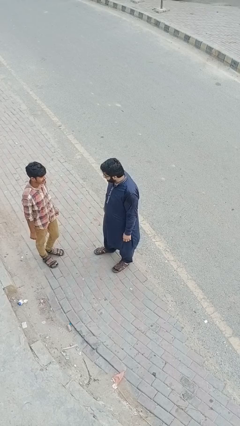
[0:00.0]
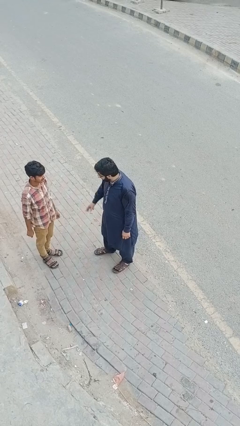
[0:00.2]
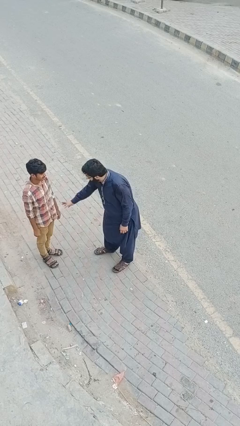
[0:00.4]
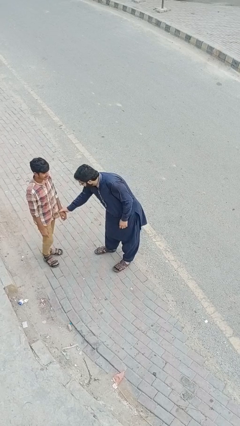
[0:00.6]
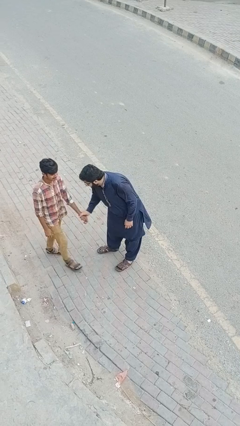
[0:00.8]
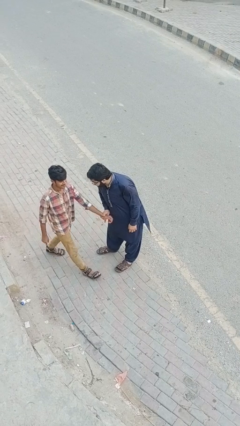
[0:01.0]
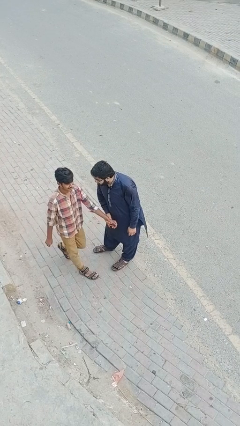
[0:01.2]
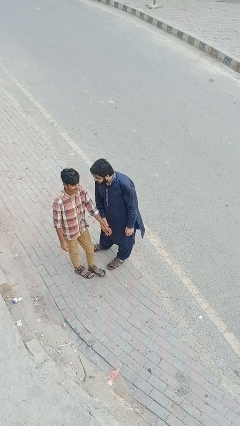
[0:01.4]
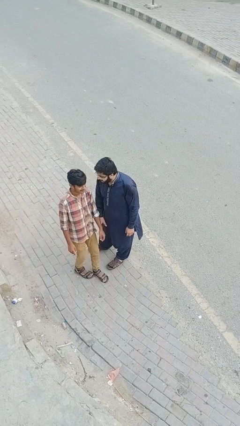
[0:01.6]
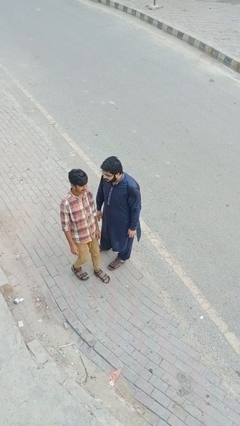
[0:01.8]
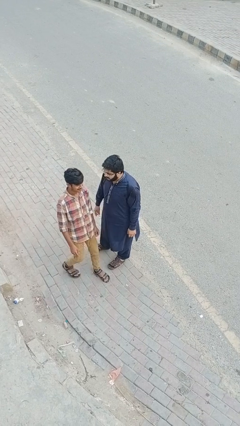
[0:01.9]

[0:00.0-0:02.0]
person grabs person by forearm

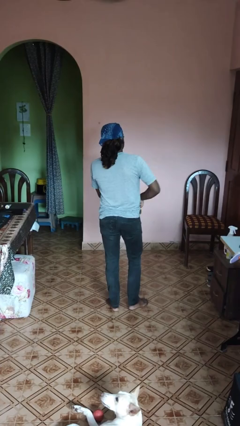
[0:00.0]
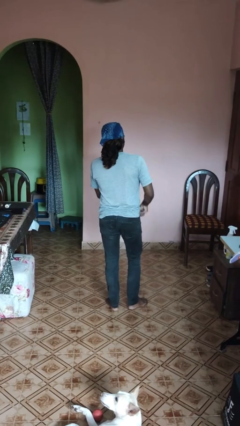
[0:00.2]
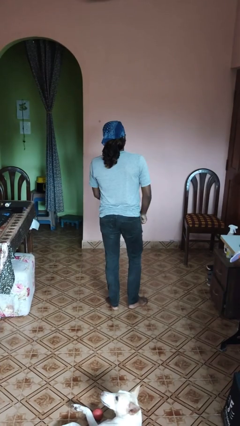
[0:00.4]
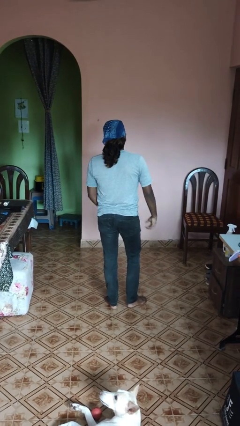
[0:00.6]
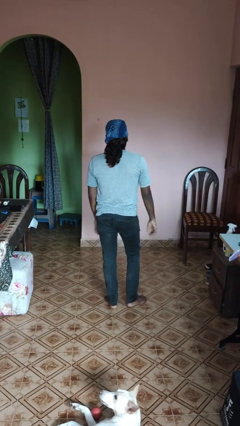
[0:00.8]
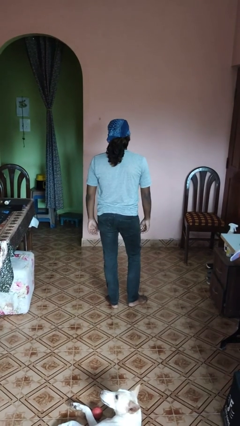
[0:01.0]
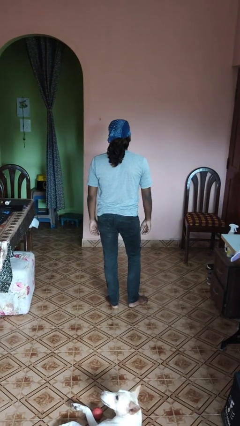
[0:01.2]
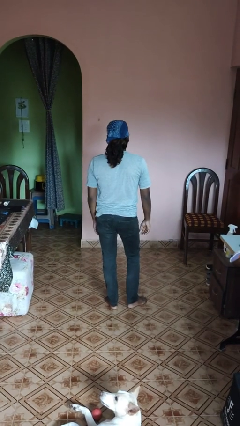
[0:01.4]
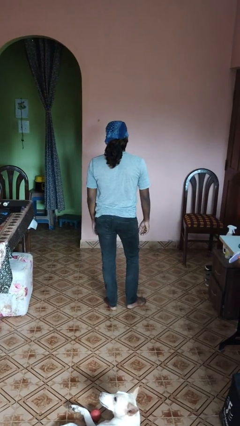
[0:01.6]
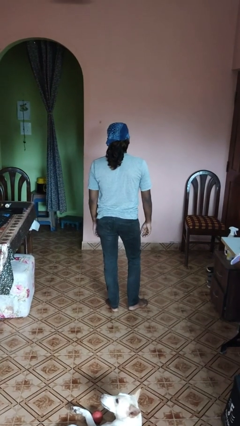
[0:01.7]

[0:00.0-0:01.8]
person puts phone into pocket

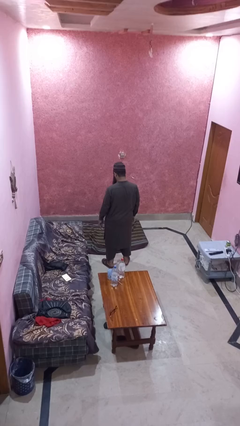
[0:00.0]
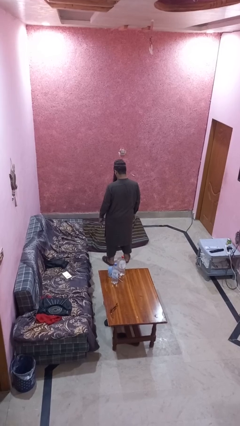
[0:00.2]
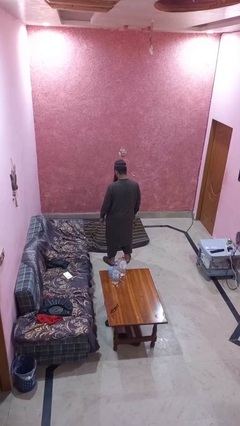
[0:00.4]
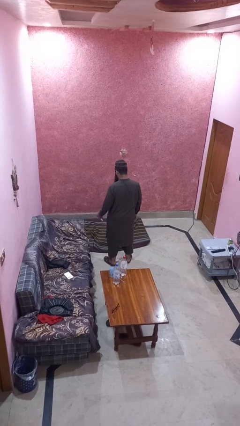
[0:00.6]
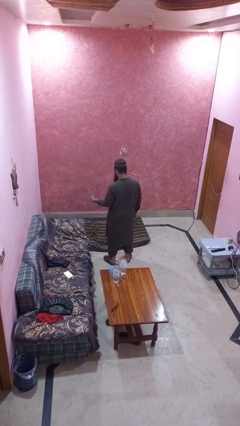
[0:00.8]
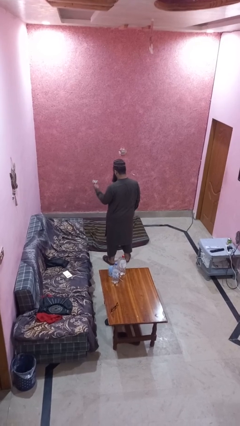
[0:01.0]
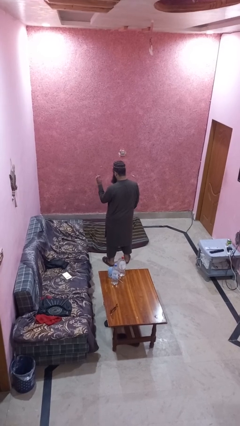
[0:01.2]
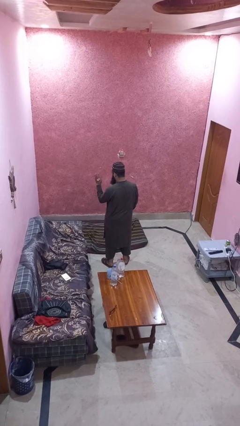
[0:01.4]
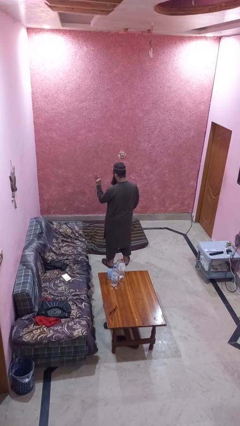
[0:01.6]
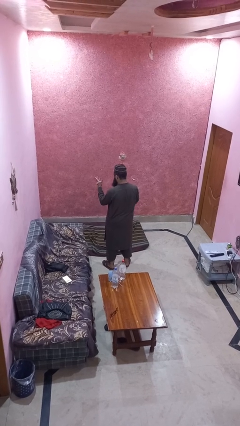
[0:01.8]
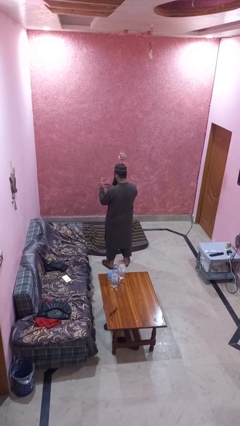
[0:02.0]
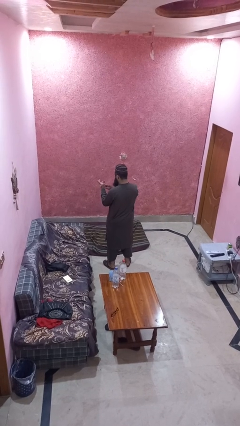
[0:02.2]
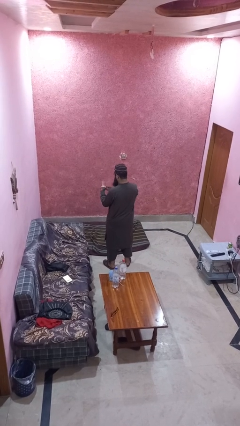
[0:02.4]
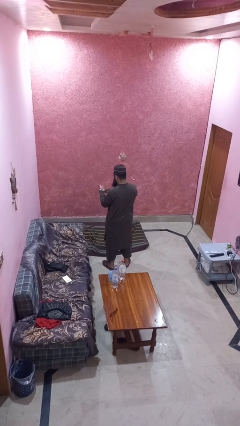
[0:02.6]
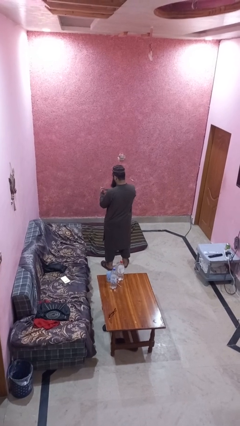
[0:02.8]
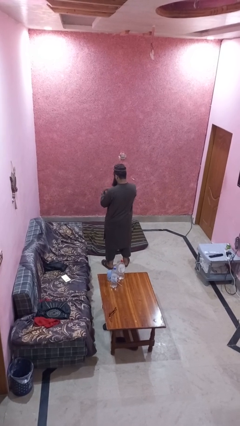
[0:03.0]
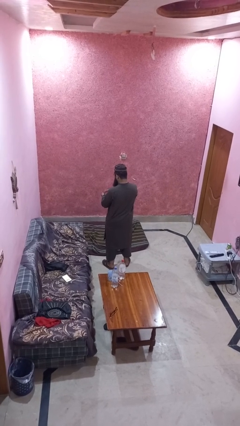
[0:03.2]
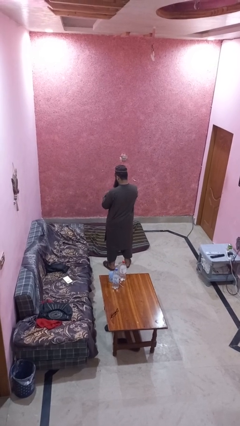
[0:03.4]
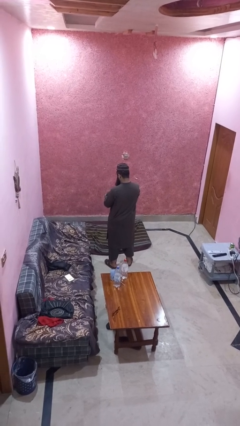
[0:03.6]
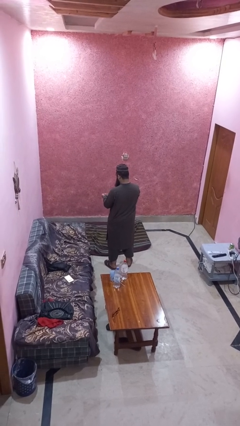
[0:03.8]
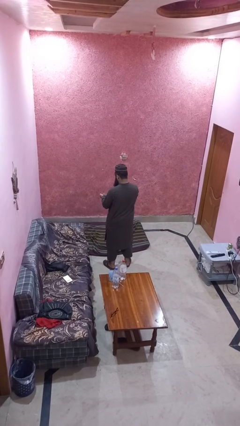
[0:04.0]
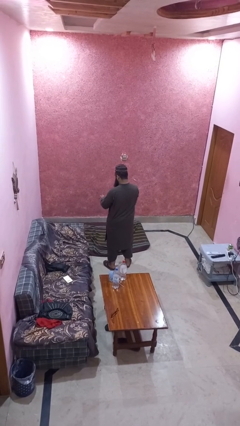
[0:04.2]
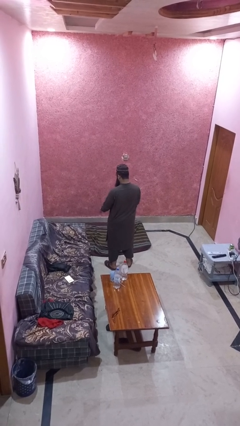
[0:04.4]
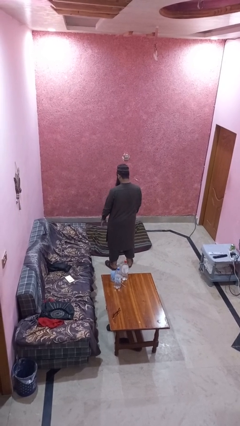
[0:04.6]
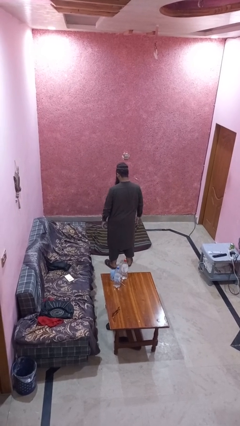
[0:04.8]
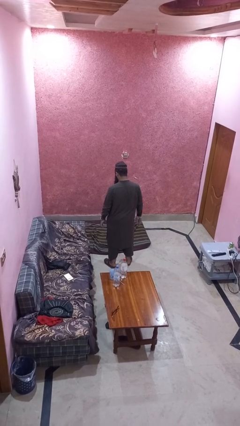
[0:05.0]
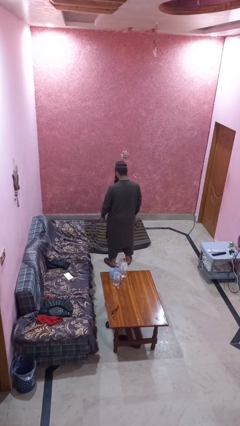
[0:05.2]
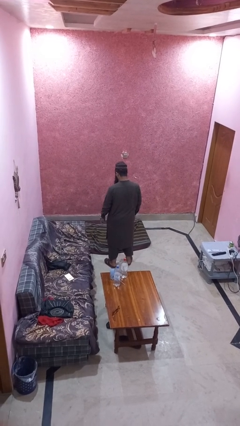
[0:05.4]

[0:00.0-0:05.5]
person puts on wristwatch

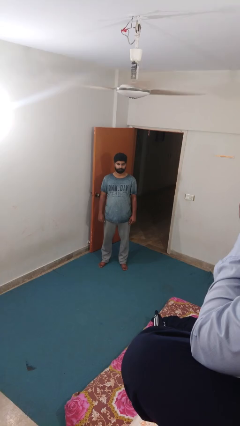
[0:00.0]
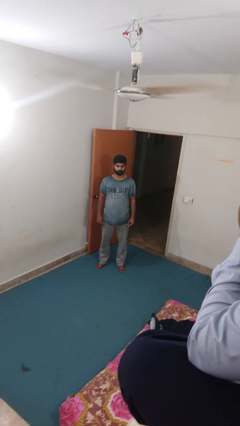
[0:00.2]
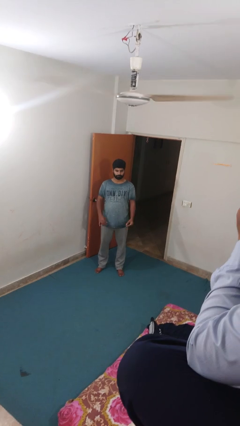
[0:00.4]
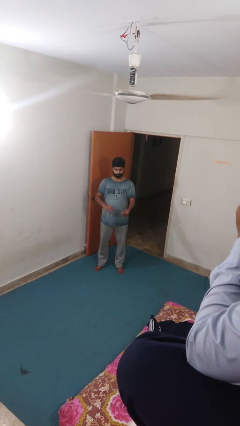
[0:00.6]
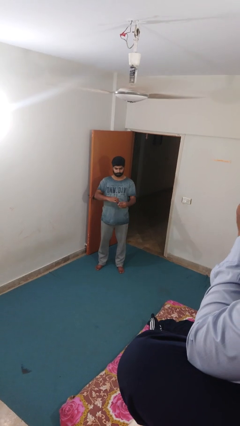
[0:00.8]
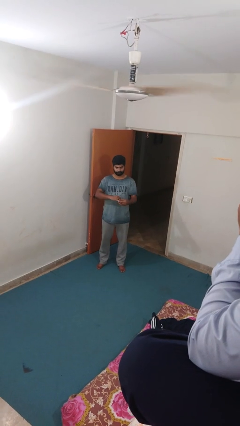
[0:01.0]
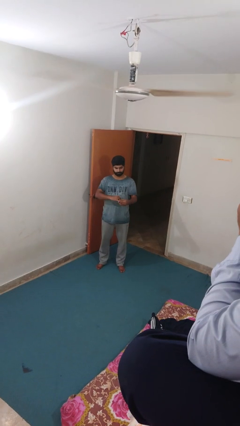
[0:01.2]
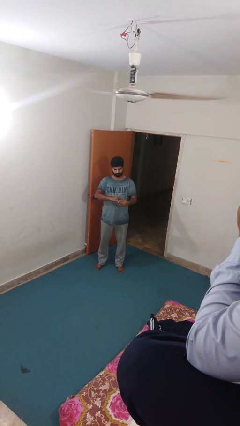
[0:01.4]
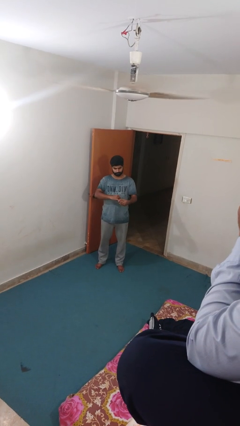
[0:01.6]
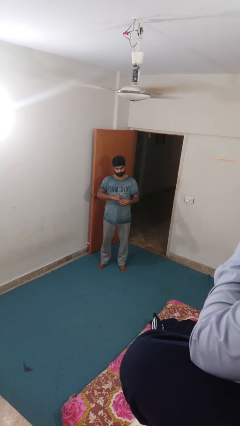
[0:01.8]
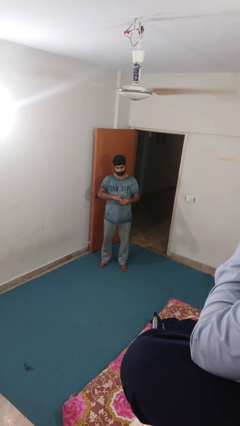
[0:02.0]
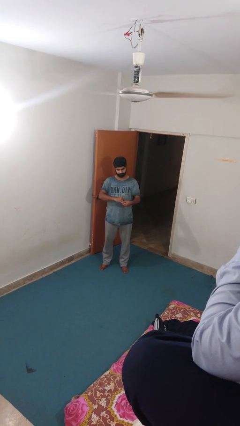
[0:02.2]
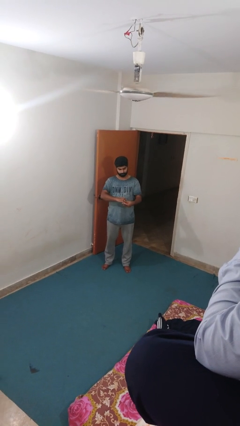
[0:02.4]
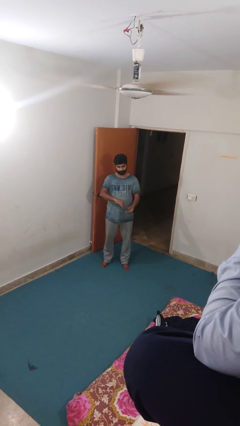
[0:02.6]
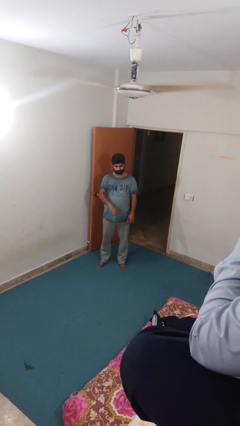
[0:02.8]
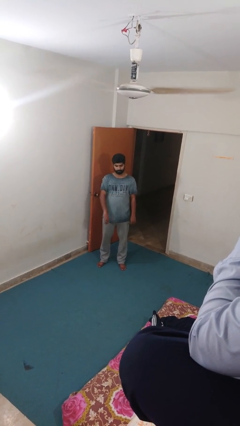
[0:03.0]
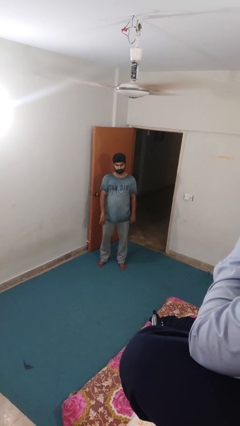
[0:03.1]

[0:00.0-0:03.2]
person puts on ring

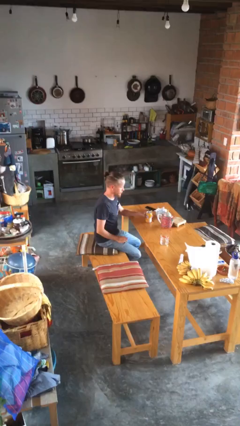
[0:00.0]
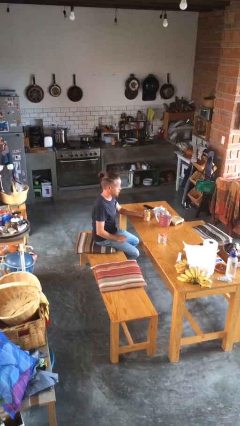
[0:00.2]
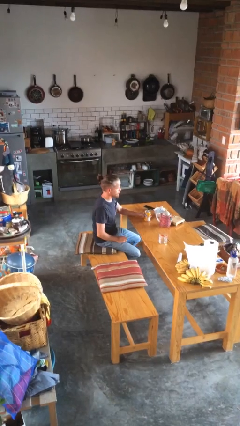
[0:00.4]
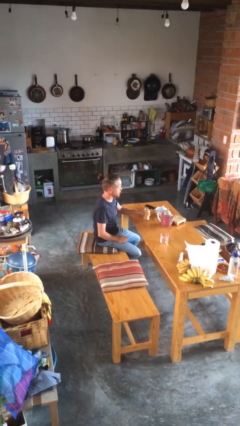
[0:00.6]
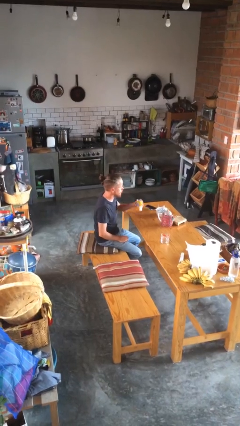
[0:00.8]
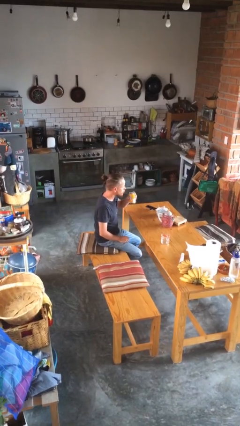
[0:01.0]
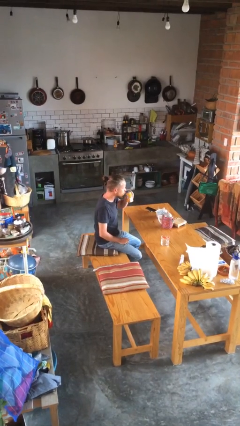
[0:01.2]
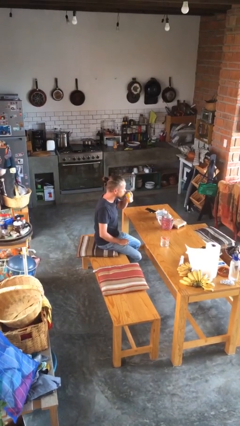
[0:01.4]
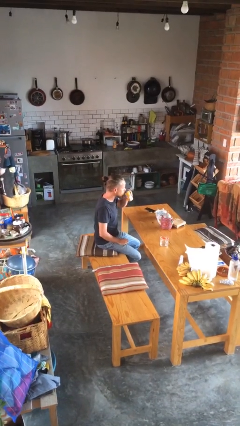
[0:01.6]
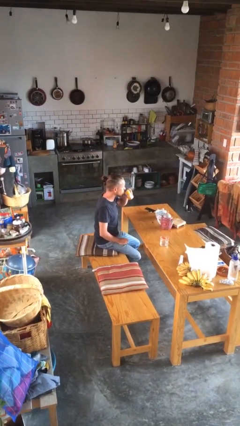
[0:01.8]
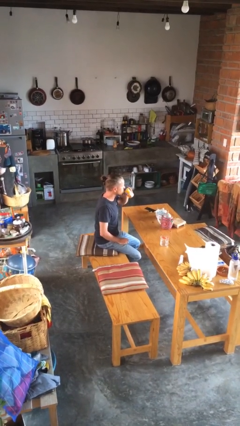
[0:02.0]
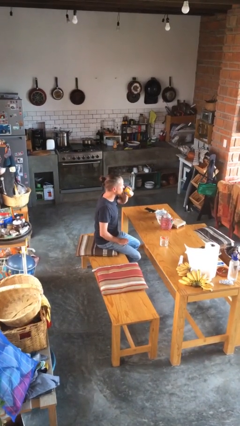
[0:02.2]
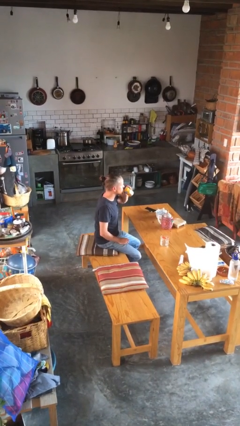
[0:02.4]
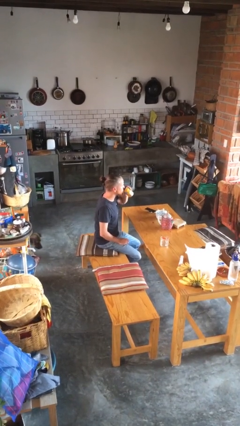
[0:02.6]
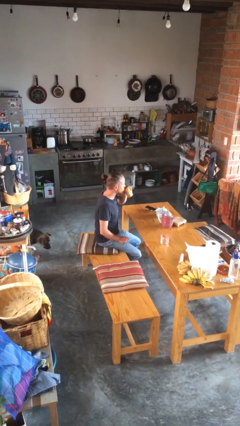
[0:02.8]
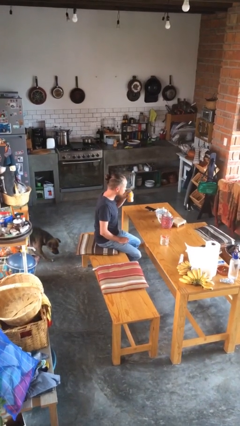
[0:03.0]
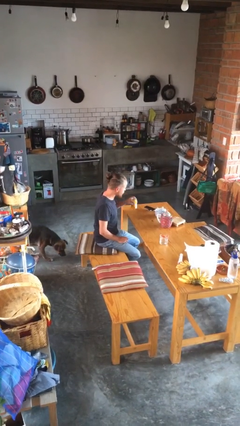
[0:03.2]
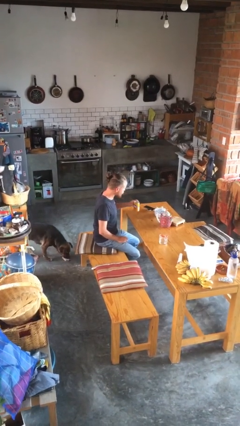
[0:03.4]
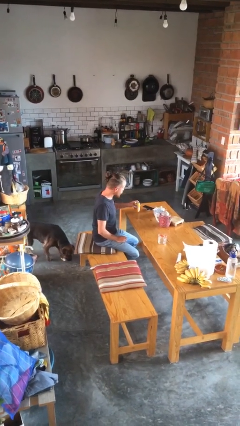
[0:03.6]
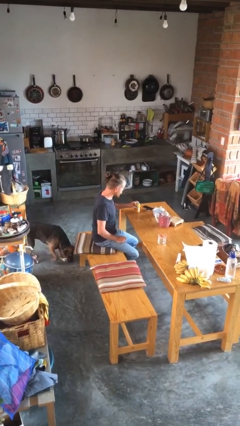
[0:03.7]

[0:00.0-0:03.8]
person drinks from beverage can

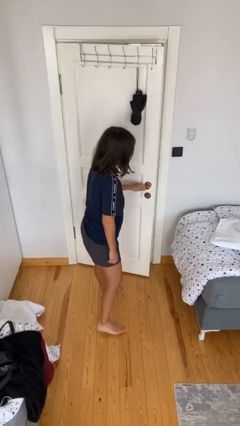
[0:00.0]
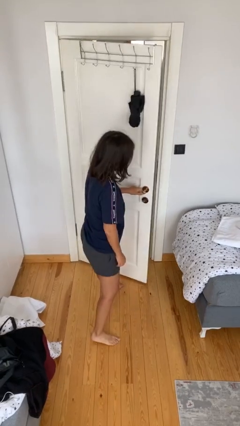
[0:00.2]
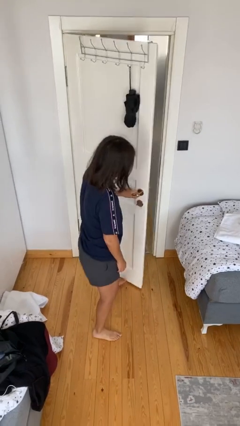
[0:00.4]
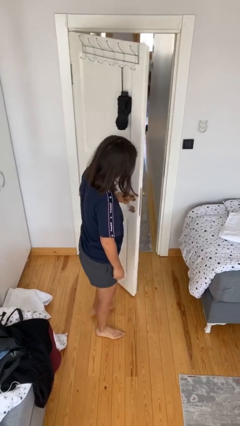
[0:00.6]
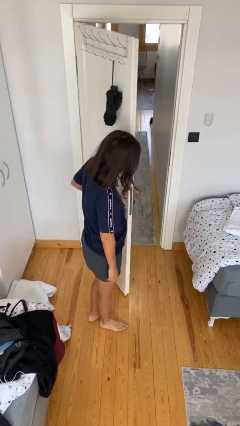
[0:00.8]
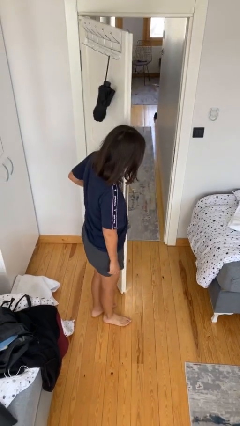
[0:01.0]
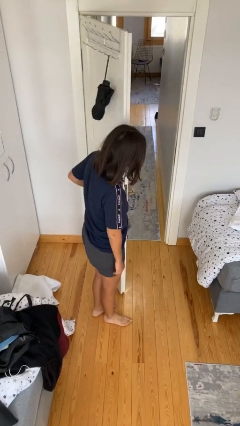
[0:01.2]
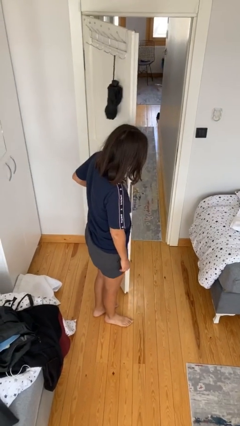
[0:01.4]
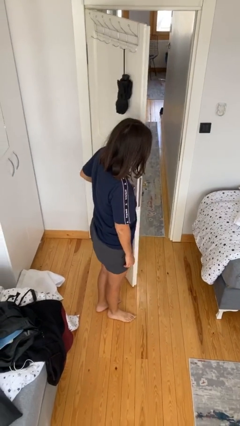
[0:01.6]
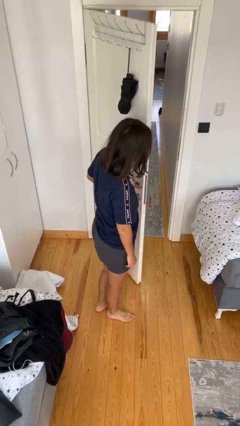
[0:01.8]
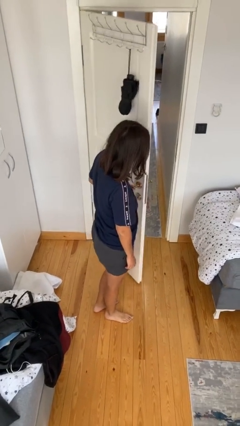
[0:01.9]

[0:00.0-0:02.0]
person opens facility door
